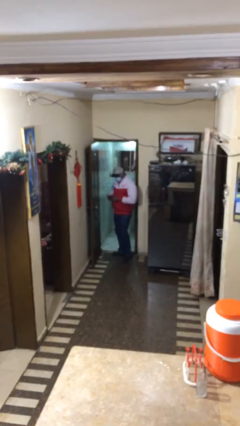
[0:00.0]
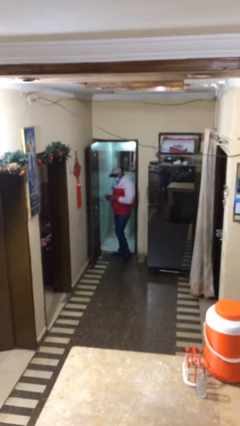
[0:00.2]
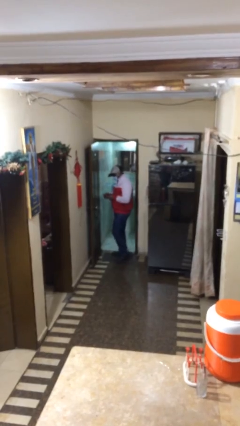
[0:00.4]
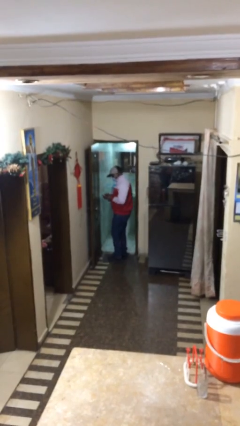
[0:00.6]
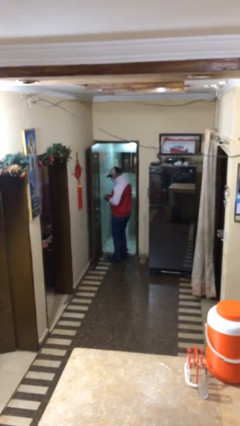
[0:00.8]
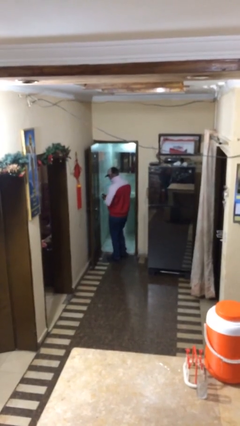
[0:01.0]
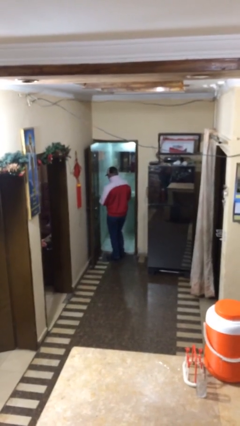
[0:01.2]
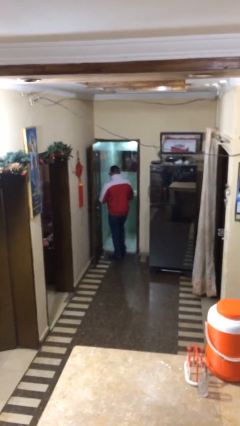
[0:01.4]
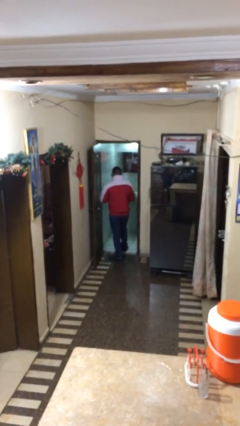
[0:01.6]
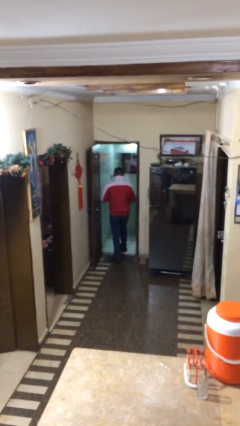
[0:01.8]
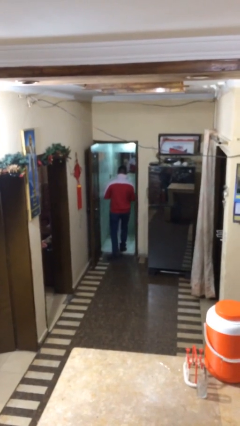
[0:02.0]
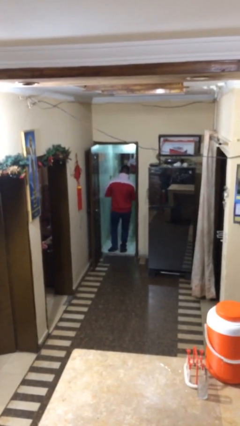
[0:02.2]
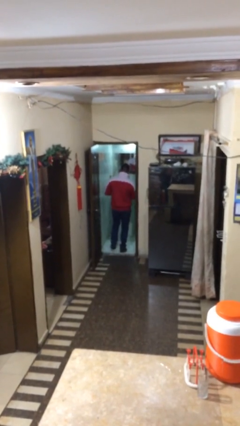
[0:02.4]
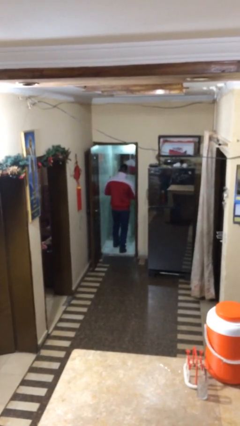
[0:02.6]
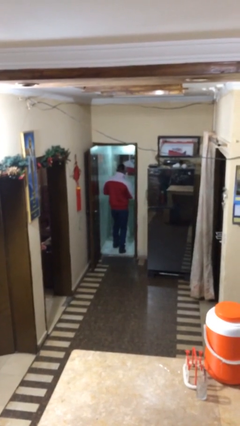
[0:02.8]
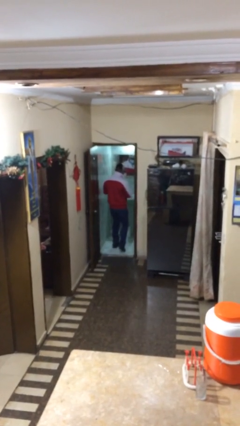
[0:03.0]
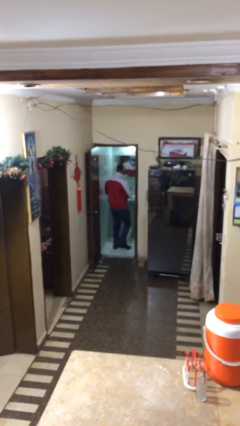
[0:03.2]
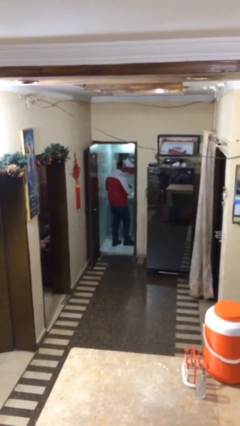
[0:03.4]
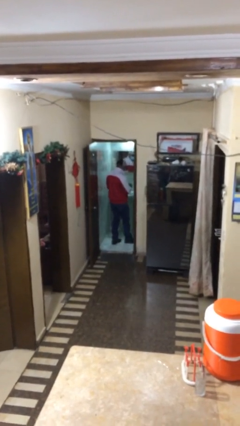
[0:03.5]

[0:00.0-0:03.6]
person exits scene through structure

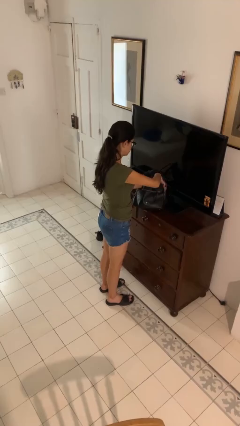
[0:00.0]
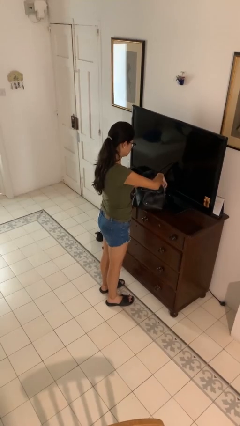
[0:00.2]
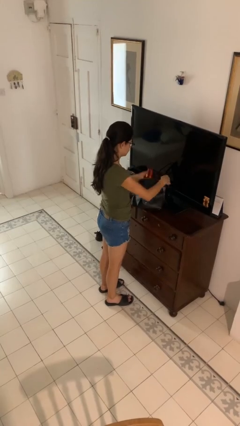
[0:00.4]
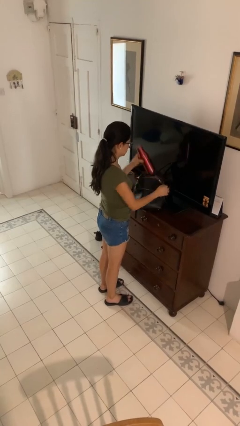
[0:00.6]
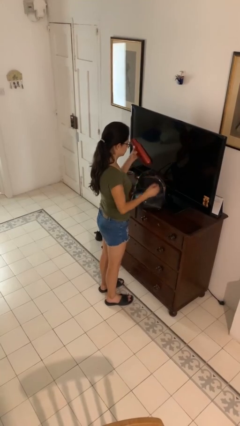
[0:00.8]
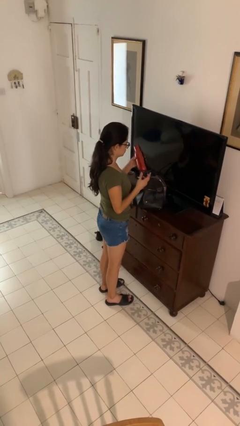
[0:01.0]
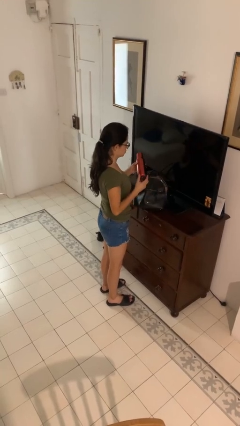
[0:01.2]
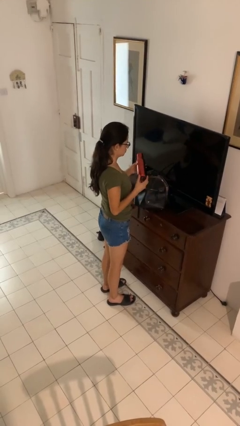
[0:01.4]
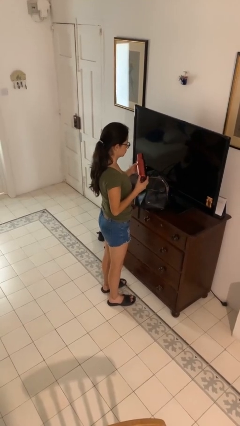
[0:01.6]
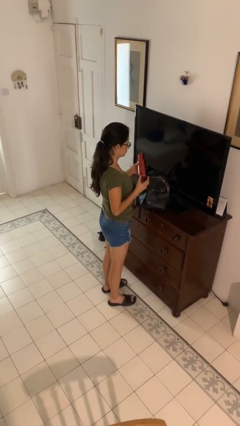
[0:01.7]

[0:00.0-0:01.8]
person takes object from purse

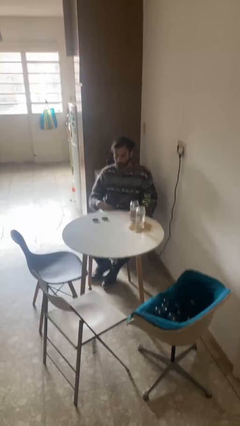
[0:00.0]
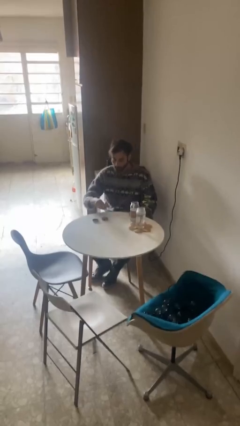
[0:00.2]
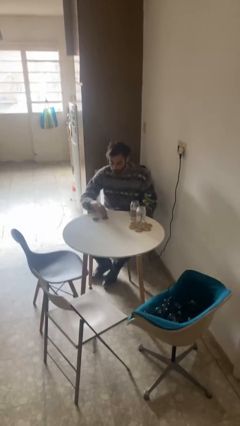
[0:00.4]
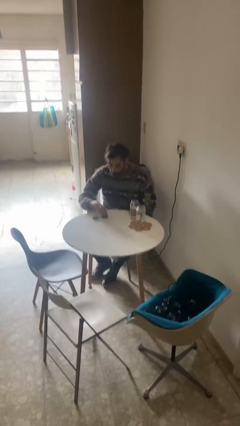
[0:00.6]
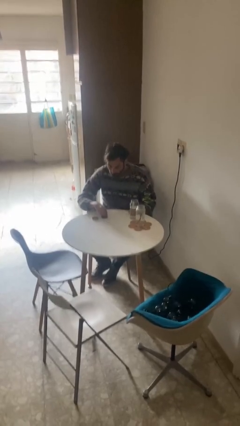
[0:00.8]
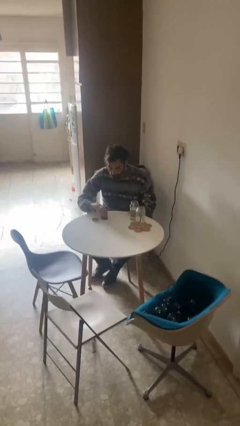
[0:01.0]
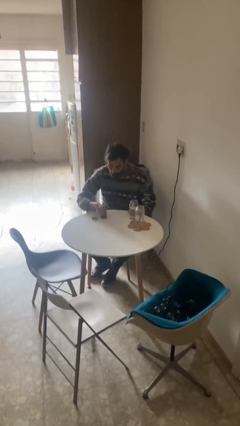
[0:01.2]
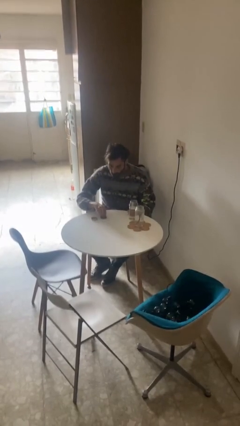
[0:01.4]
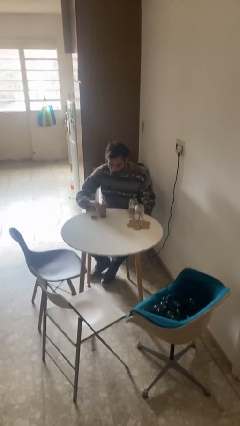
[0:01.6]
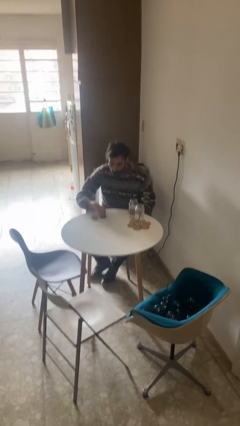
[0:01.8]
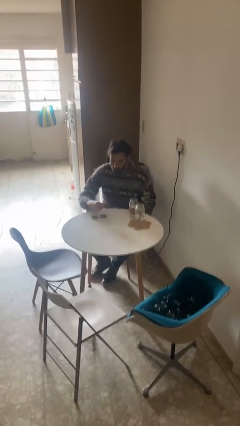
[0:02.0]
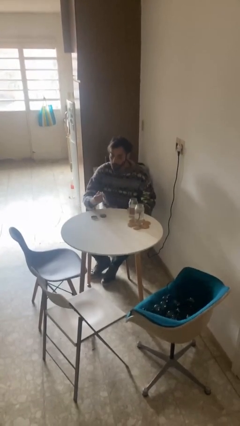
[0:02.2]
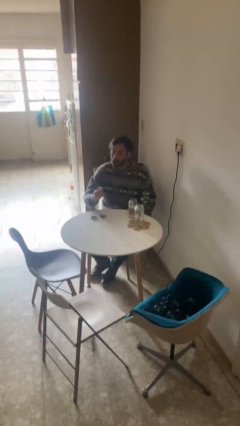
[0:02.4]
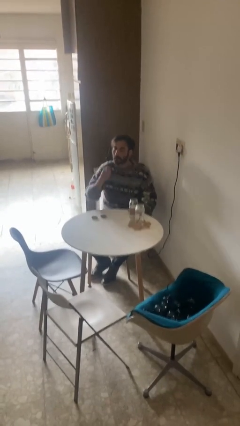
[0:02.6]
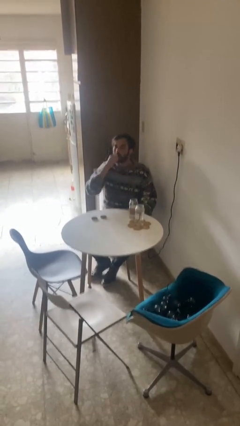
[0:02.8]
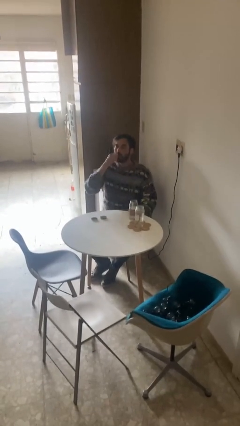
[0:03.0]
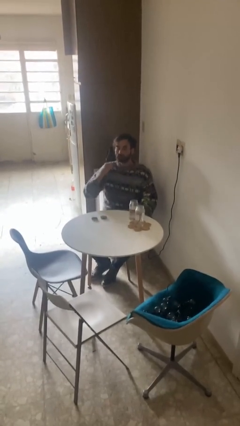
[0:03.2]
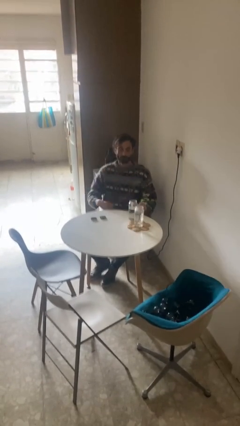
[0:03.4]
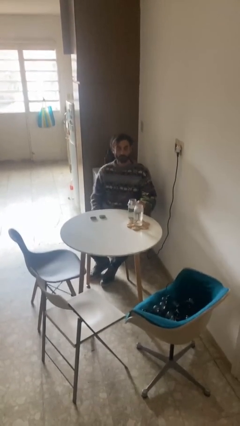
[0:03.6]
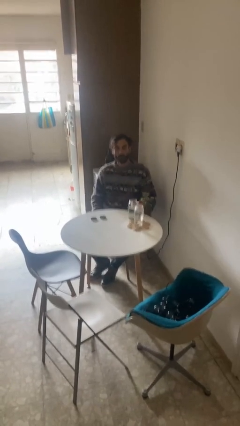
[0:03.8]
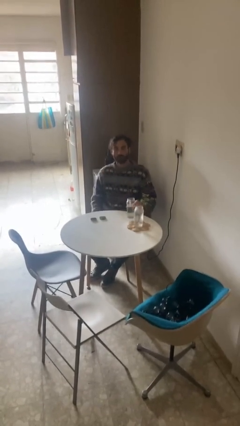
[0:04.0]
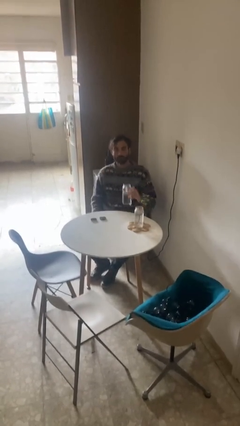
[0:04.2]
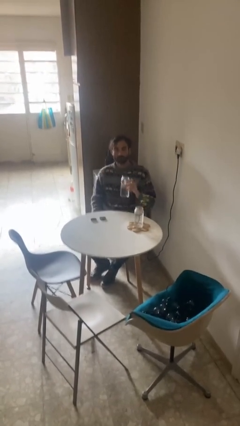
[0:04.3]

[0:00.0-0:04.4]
person takes medicine pills

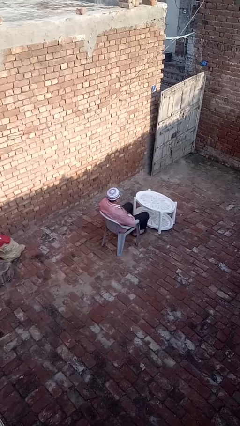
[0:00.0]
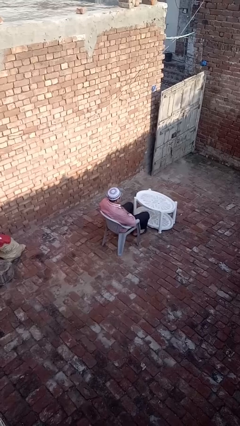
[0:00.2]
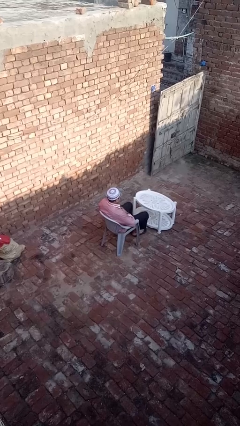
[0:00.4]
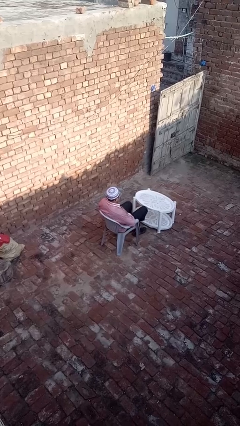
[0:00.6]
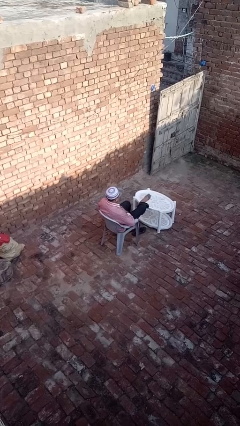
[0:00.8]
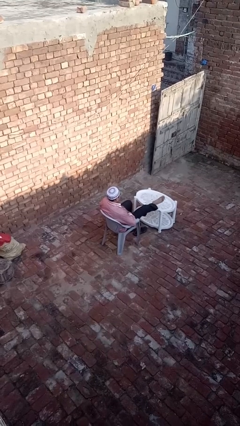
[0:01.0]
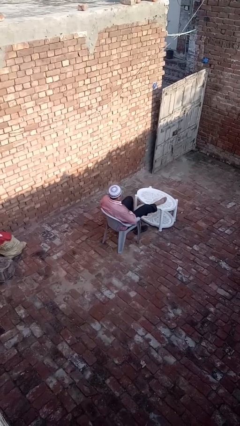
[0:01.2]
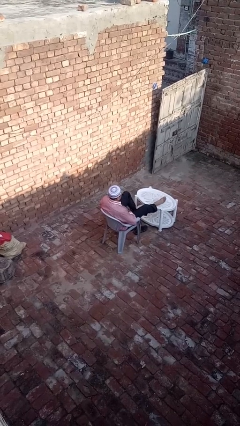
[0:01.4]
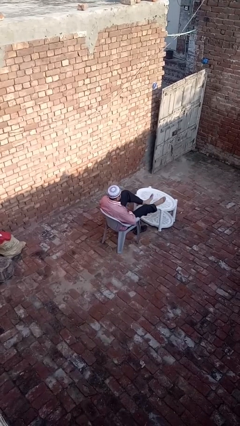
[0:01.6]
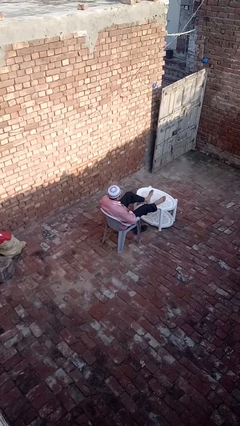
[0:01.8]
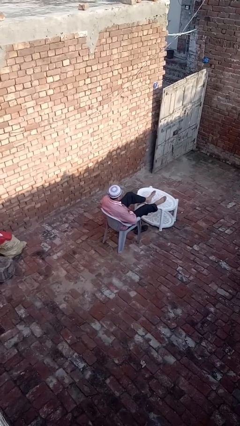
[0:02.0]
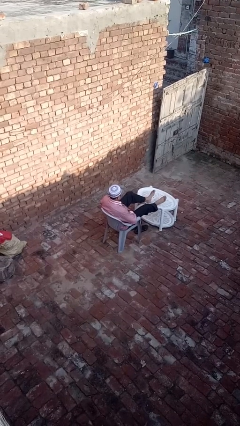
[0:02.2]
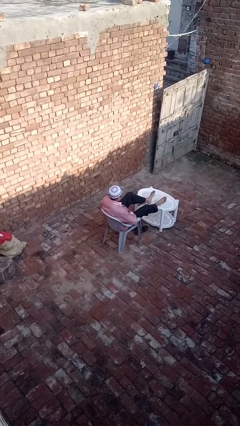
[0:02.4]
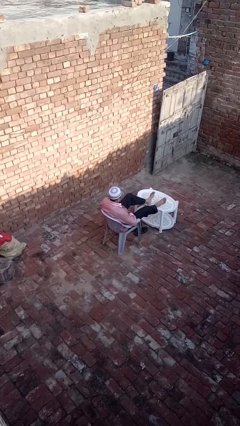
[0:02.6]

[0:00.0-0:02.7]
person puts feet up

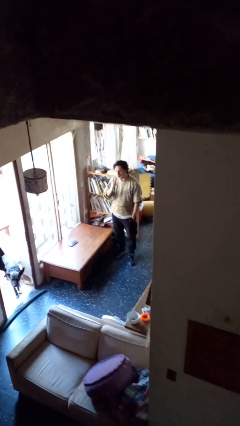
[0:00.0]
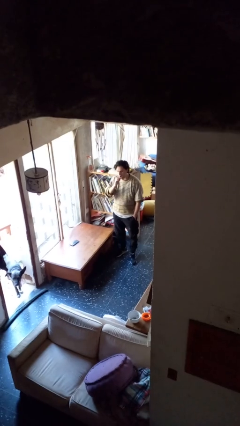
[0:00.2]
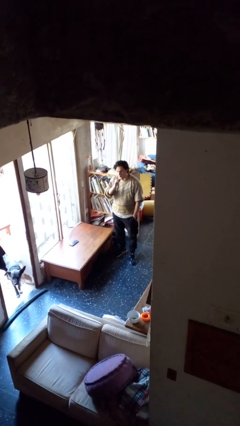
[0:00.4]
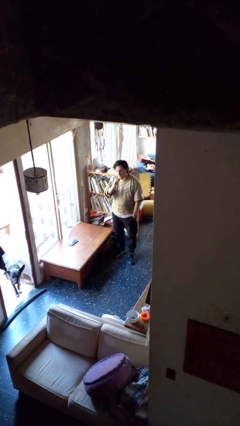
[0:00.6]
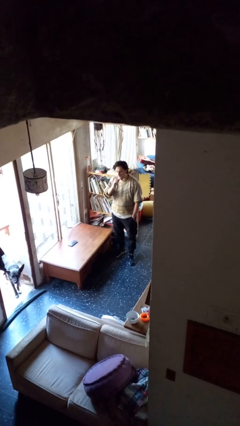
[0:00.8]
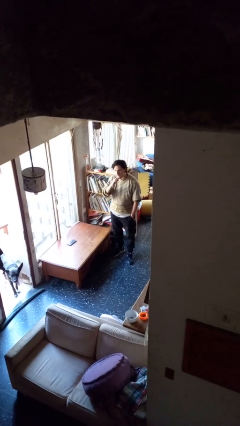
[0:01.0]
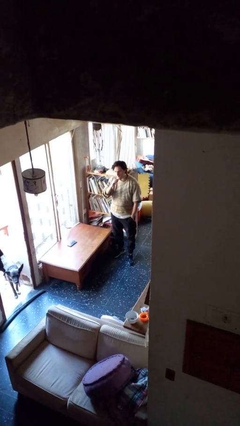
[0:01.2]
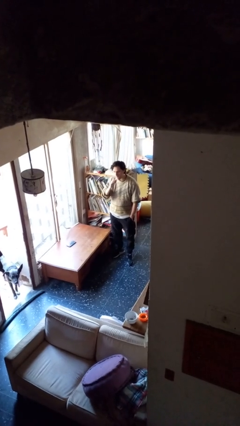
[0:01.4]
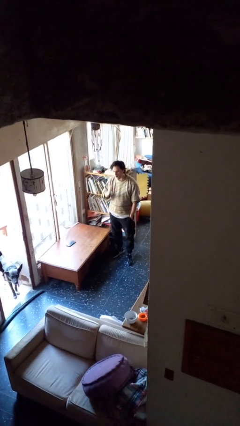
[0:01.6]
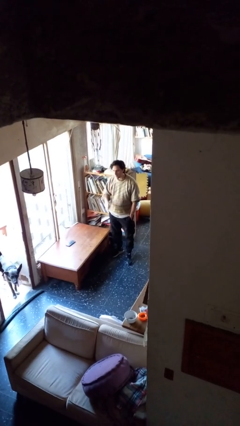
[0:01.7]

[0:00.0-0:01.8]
person brushes teeth

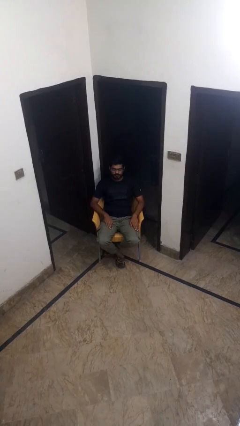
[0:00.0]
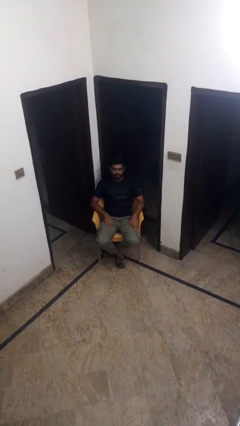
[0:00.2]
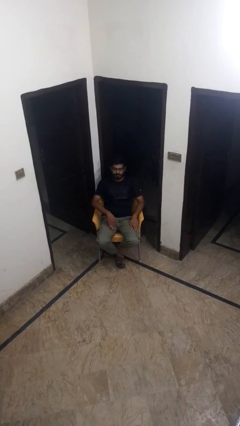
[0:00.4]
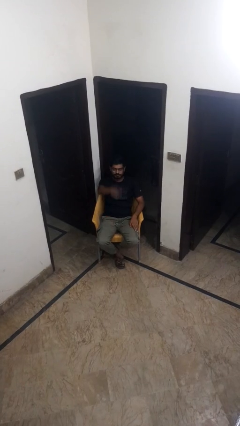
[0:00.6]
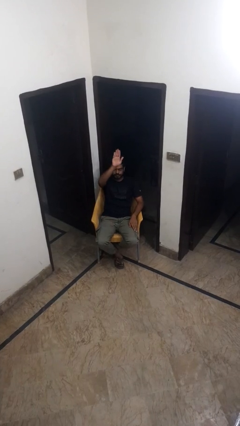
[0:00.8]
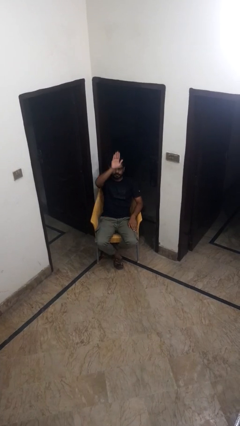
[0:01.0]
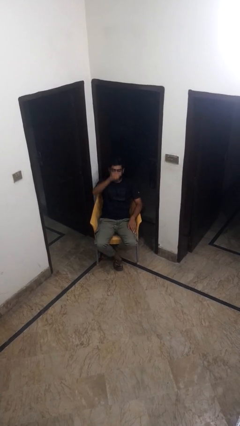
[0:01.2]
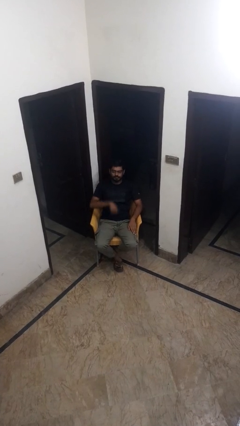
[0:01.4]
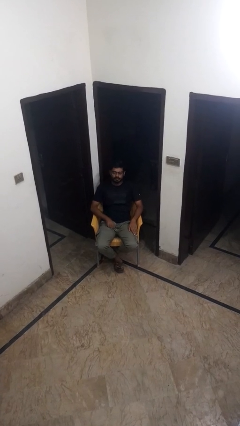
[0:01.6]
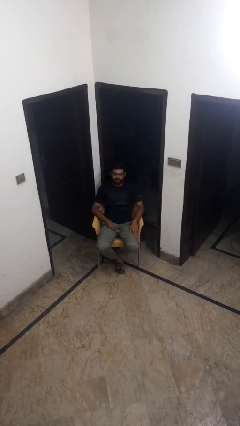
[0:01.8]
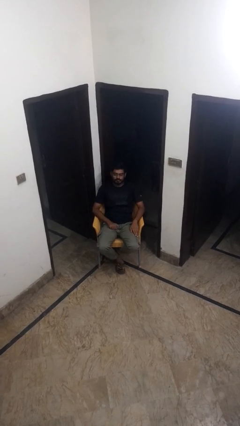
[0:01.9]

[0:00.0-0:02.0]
person gestures swipe up

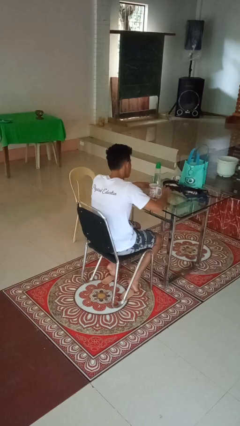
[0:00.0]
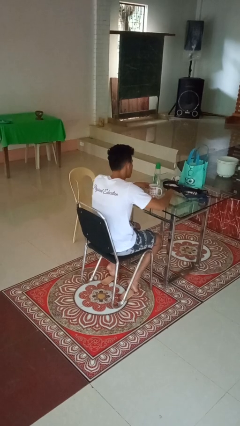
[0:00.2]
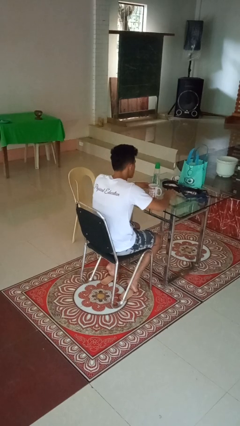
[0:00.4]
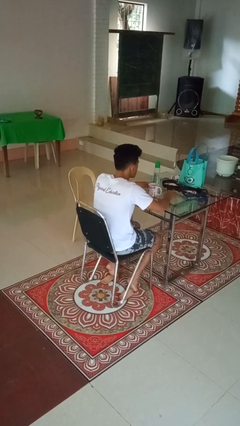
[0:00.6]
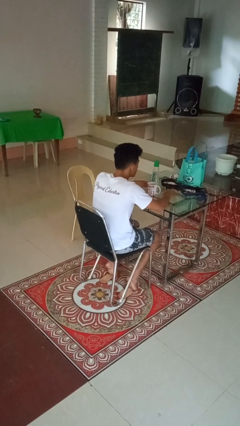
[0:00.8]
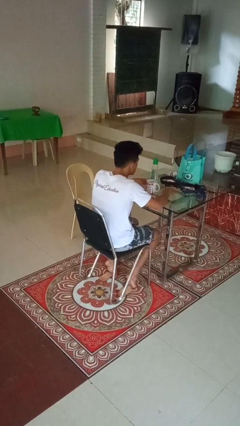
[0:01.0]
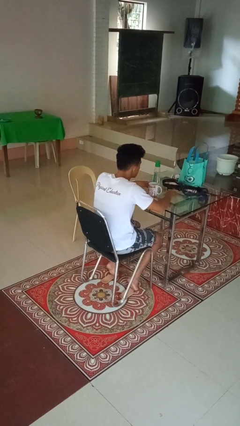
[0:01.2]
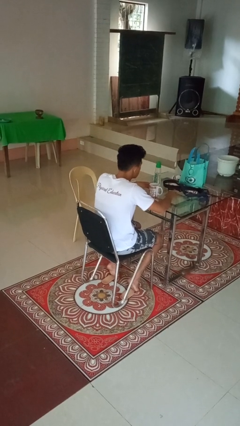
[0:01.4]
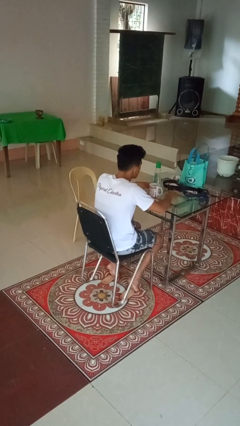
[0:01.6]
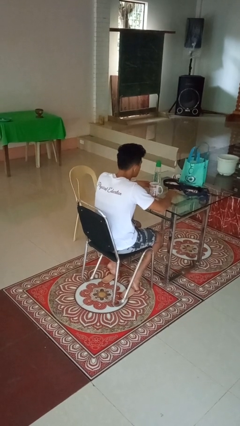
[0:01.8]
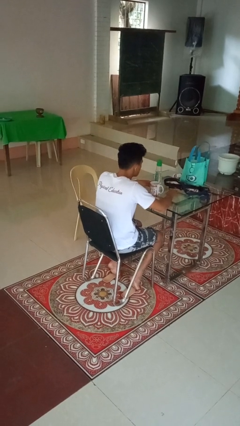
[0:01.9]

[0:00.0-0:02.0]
person puts down object on table
